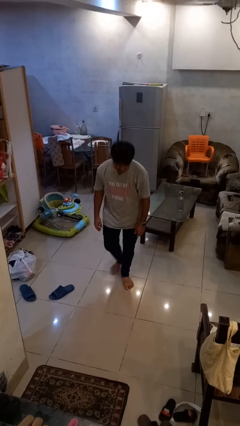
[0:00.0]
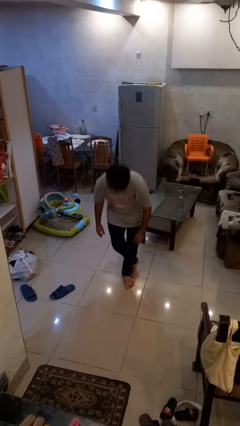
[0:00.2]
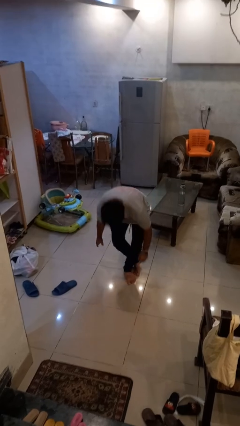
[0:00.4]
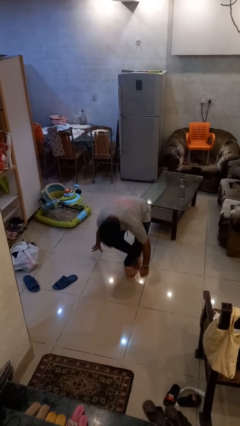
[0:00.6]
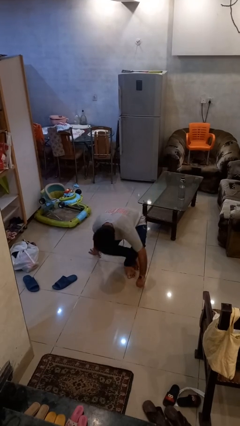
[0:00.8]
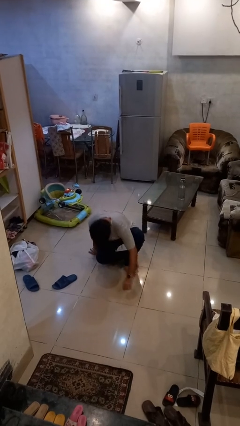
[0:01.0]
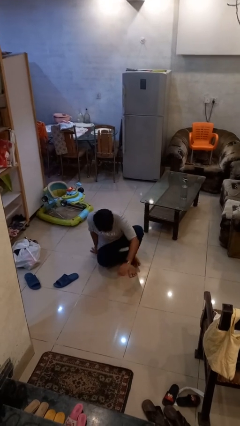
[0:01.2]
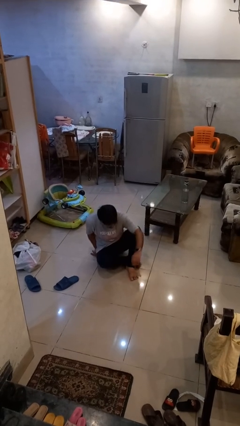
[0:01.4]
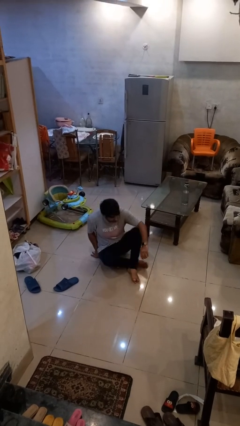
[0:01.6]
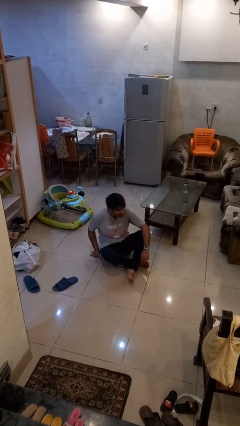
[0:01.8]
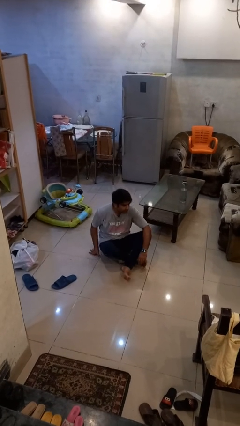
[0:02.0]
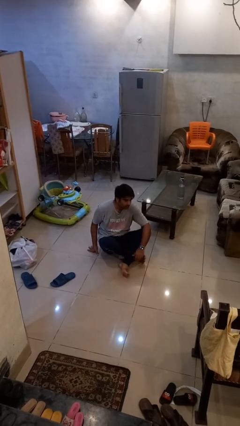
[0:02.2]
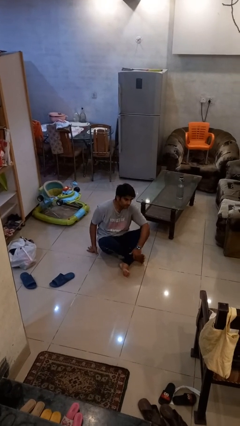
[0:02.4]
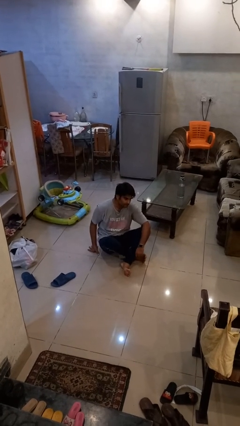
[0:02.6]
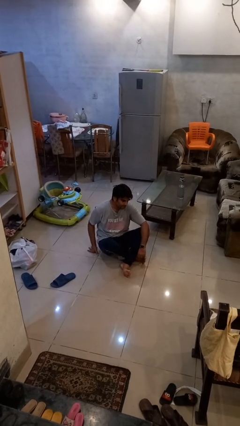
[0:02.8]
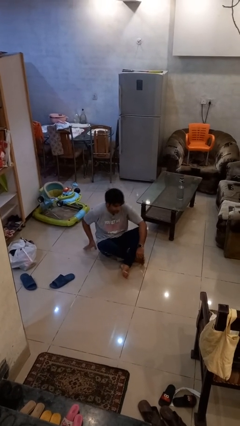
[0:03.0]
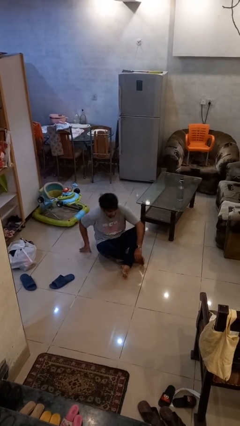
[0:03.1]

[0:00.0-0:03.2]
person sits crisscross

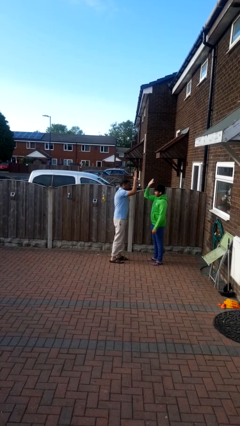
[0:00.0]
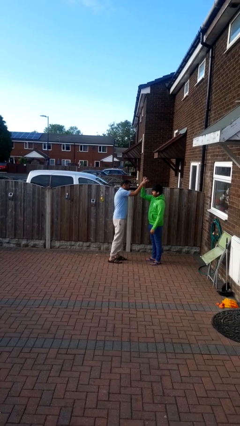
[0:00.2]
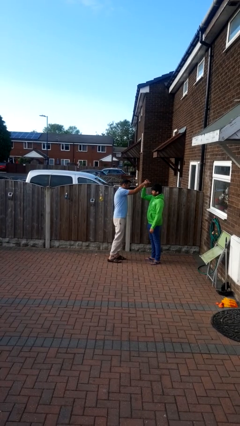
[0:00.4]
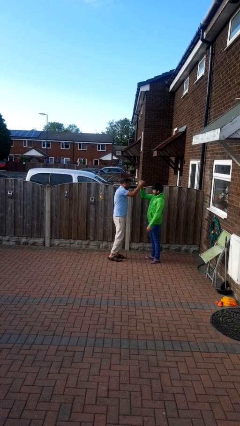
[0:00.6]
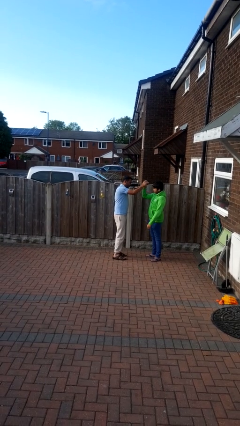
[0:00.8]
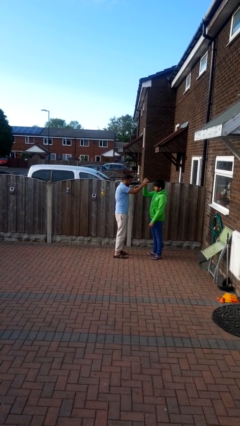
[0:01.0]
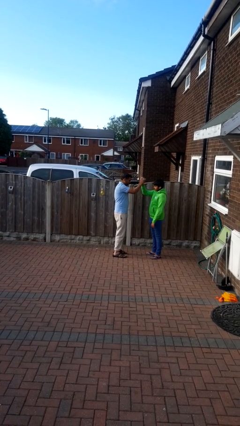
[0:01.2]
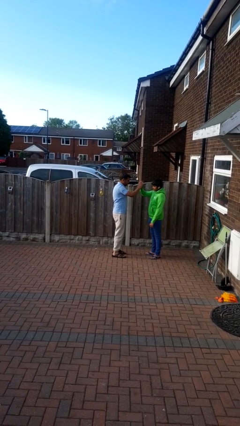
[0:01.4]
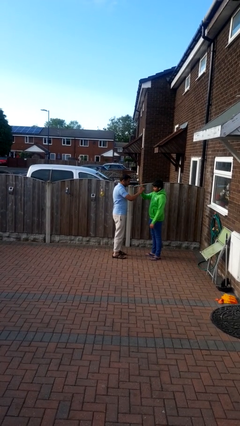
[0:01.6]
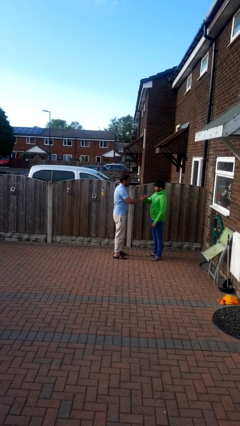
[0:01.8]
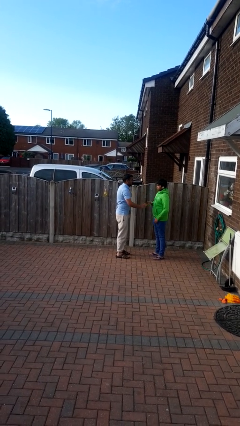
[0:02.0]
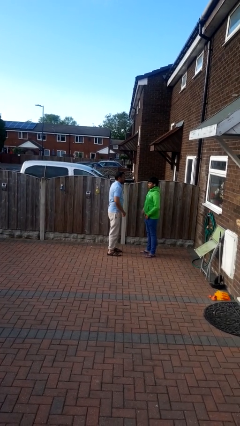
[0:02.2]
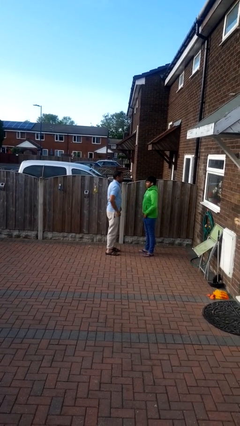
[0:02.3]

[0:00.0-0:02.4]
person highfives hand

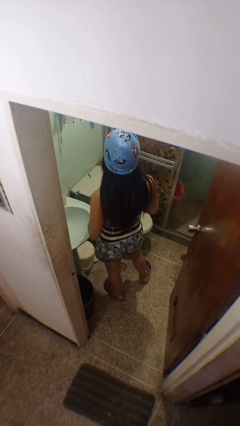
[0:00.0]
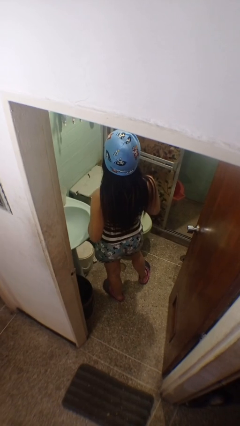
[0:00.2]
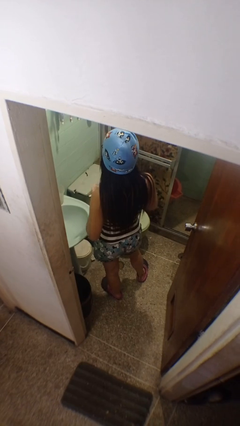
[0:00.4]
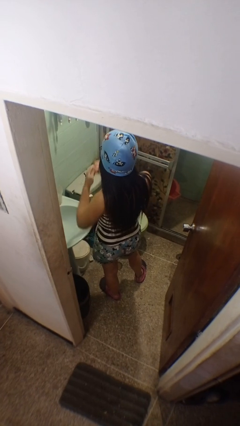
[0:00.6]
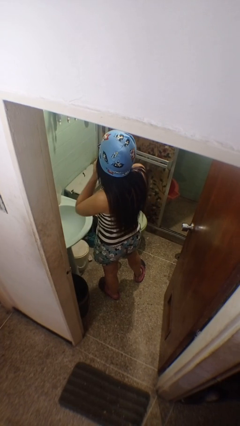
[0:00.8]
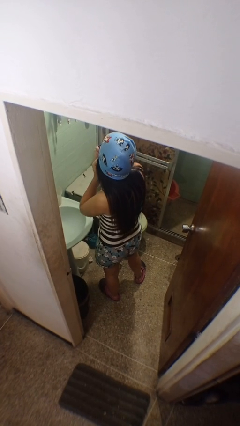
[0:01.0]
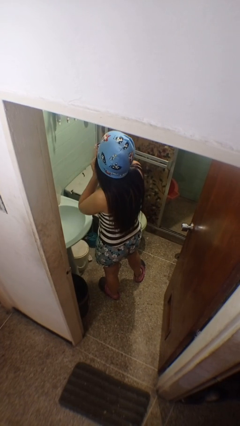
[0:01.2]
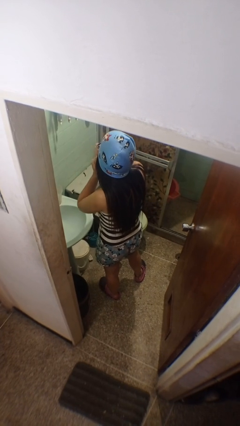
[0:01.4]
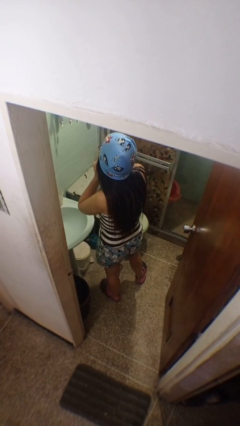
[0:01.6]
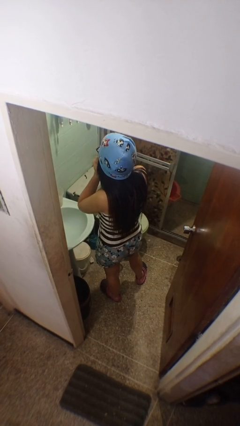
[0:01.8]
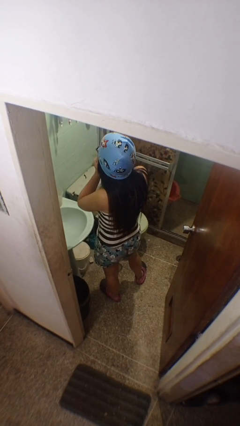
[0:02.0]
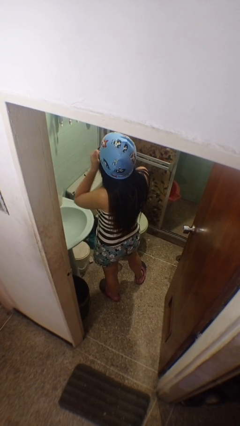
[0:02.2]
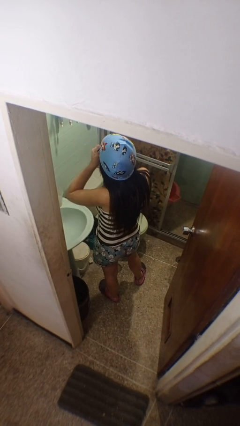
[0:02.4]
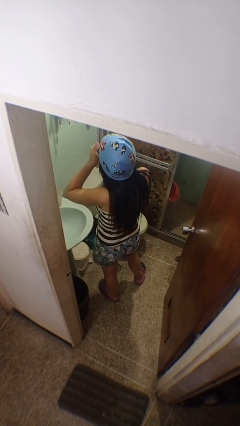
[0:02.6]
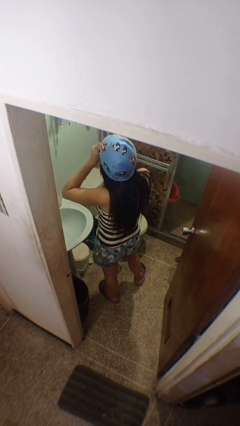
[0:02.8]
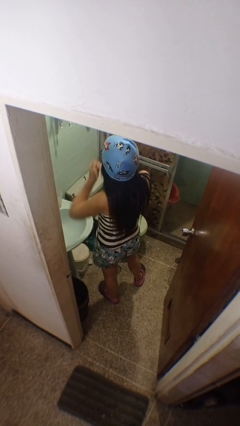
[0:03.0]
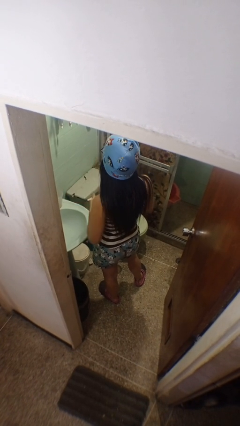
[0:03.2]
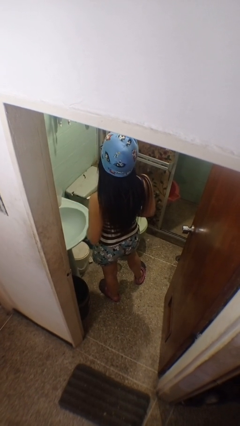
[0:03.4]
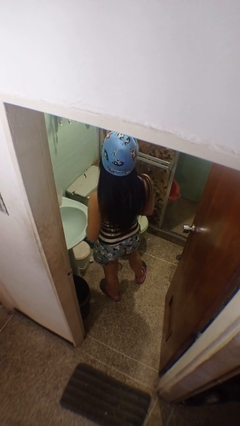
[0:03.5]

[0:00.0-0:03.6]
person flosses

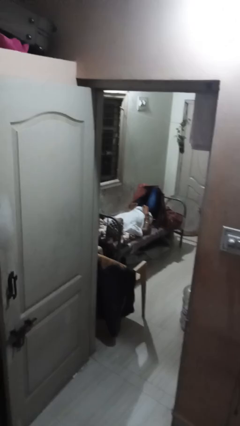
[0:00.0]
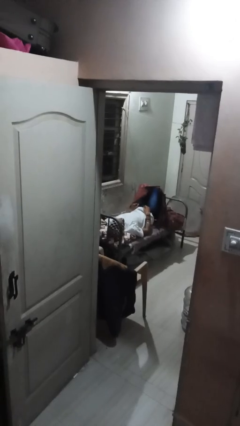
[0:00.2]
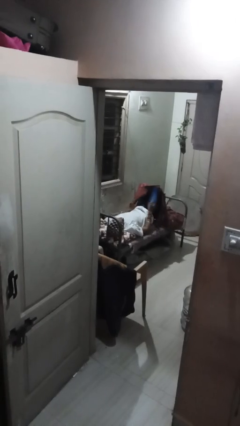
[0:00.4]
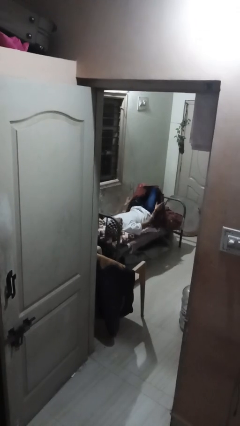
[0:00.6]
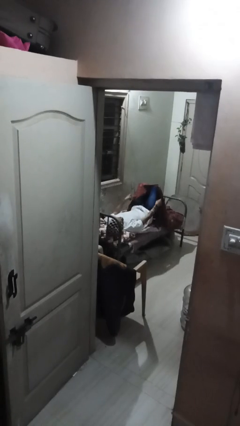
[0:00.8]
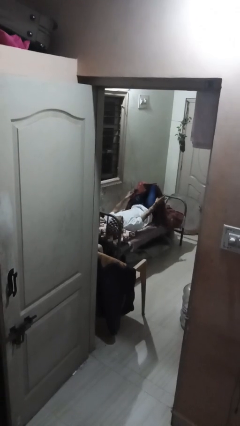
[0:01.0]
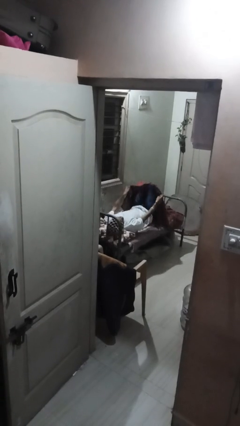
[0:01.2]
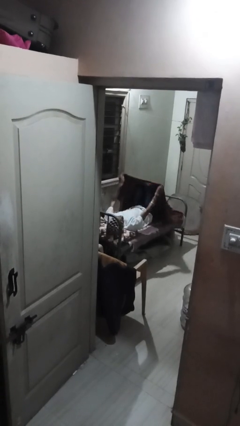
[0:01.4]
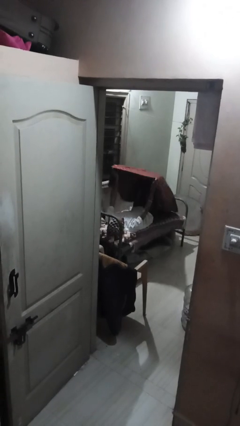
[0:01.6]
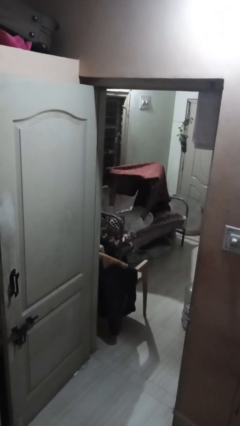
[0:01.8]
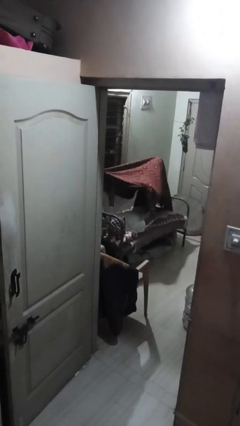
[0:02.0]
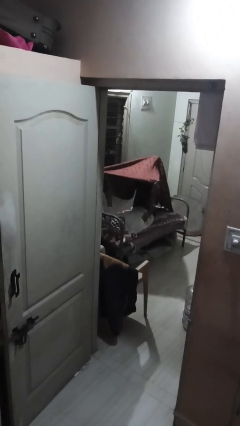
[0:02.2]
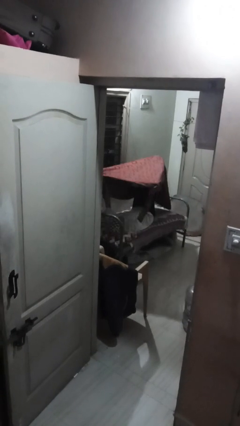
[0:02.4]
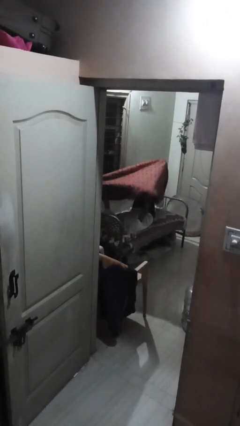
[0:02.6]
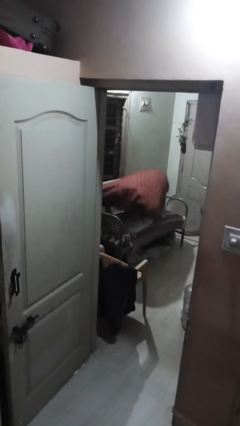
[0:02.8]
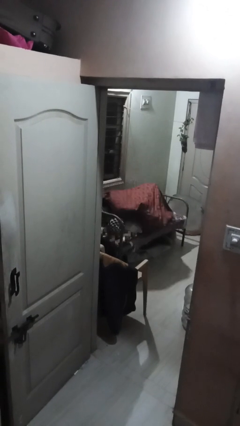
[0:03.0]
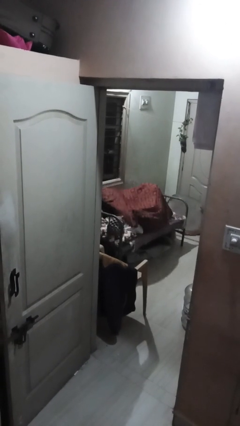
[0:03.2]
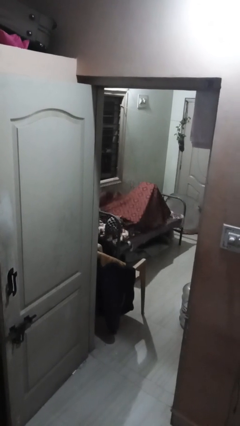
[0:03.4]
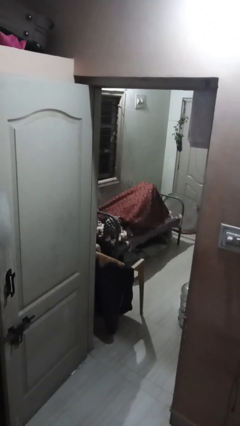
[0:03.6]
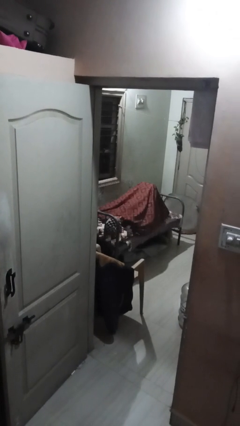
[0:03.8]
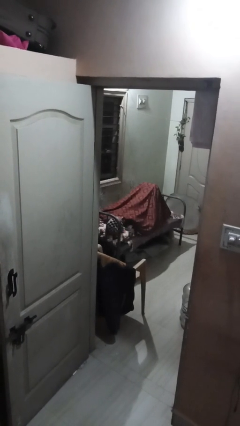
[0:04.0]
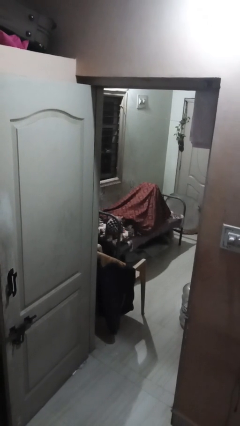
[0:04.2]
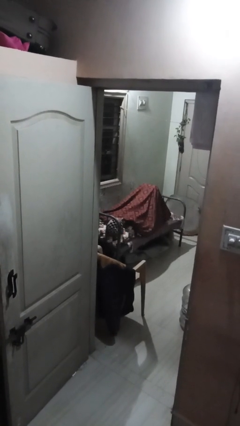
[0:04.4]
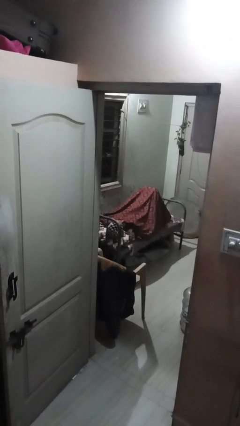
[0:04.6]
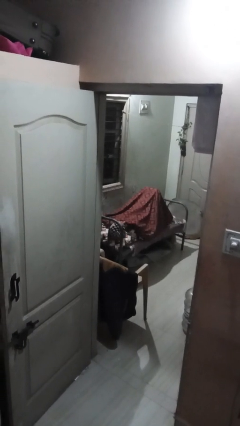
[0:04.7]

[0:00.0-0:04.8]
person covers with bedsheets

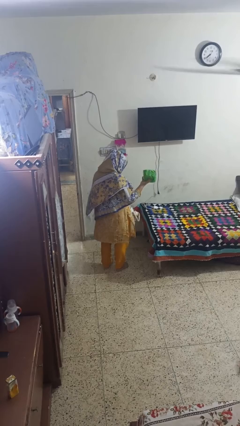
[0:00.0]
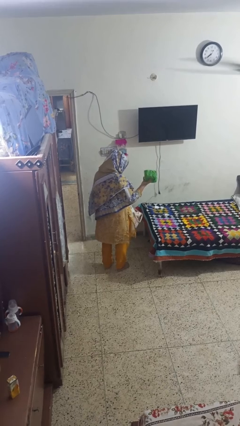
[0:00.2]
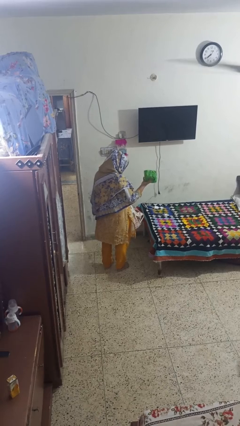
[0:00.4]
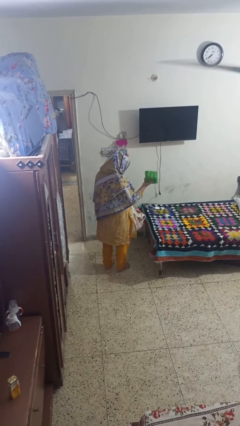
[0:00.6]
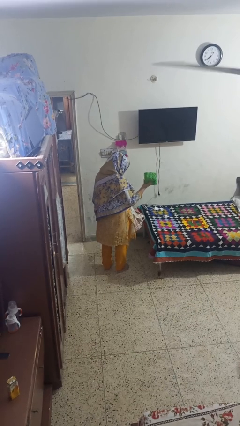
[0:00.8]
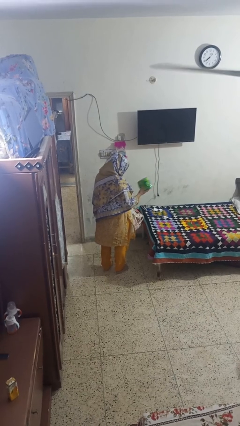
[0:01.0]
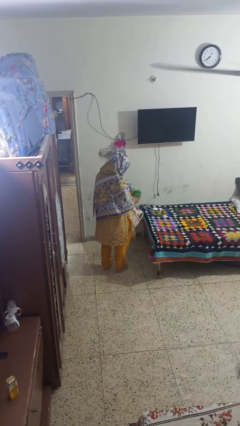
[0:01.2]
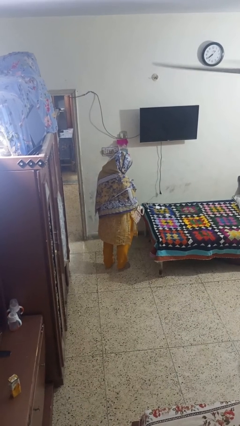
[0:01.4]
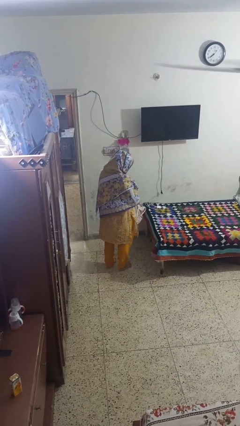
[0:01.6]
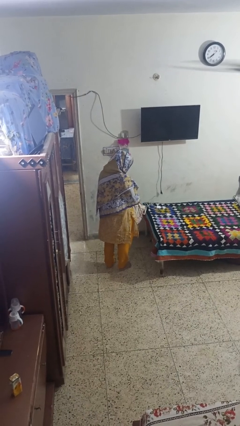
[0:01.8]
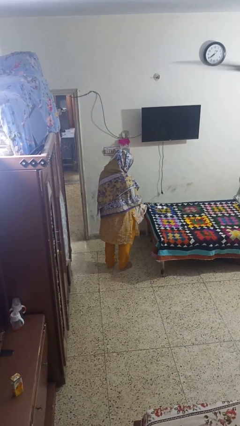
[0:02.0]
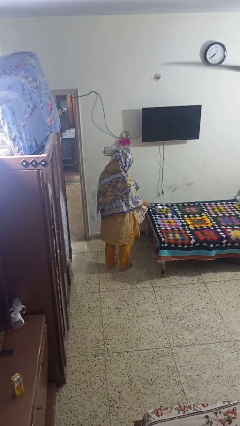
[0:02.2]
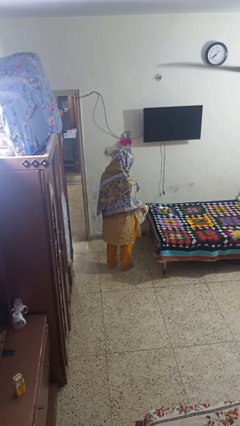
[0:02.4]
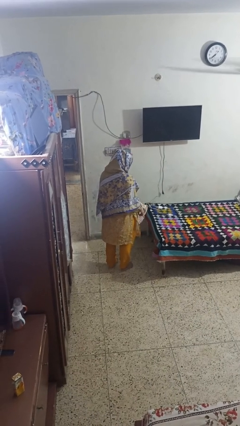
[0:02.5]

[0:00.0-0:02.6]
person puts object into bag

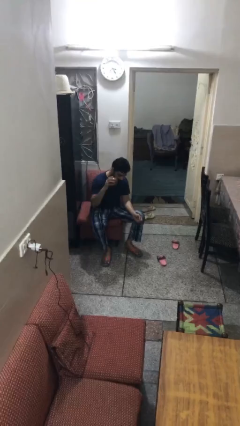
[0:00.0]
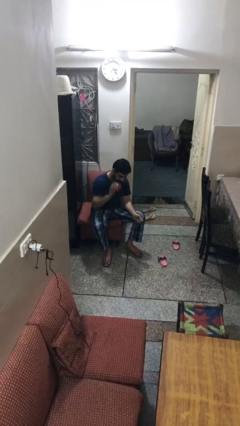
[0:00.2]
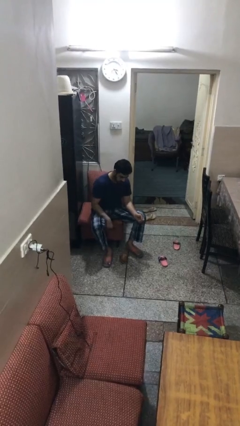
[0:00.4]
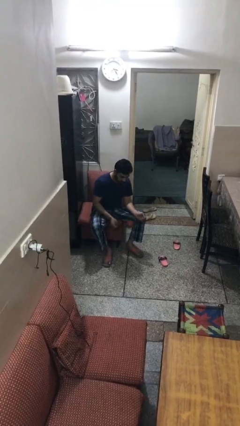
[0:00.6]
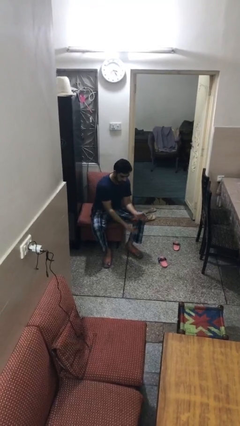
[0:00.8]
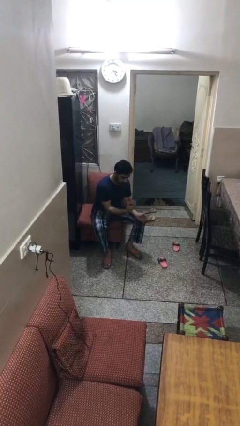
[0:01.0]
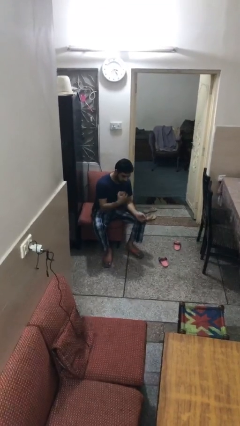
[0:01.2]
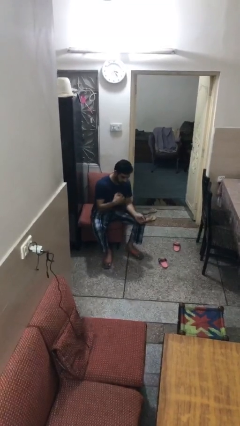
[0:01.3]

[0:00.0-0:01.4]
person bounces ball on floor
